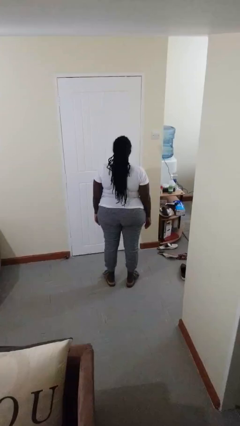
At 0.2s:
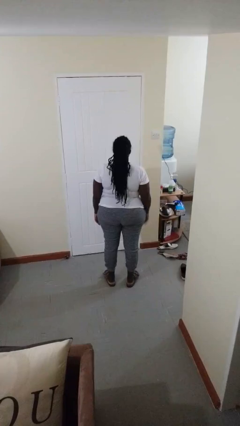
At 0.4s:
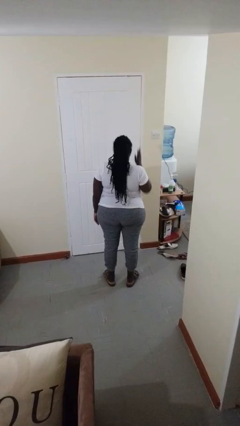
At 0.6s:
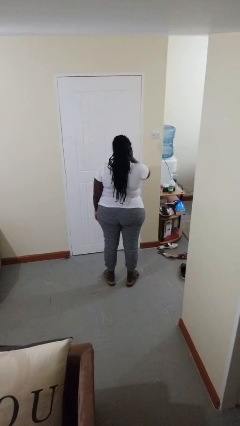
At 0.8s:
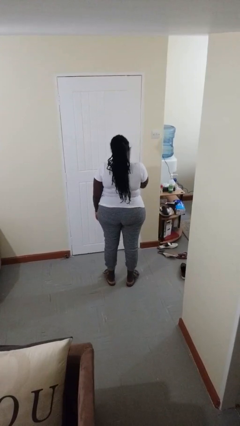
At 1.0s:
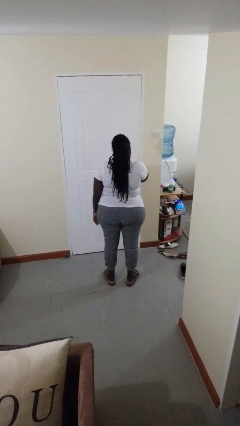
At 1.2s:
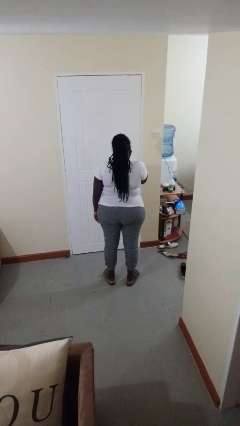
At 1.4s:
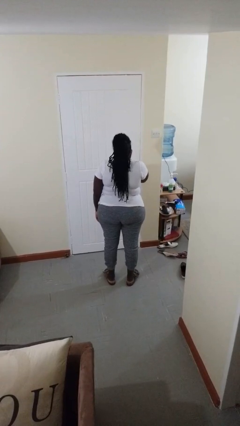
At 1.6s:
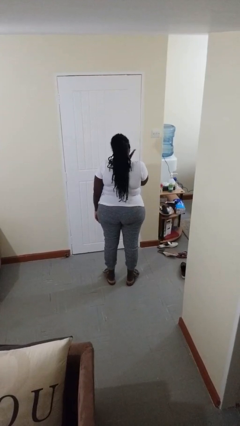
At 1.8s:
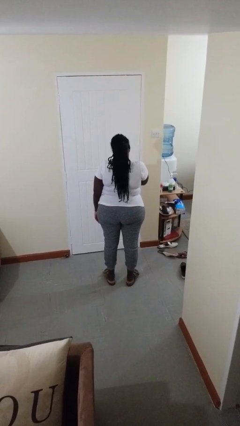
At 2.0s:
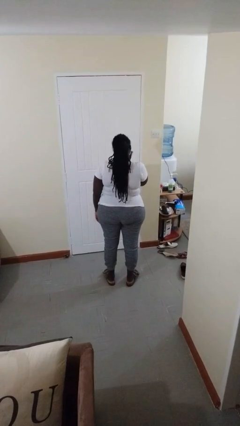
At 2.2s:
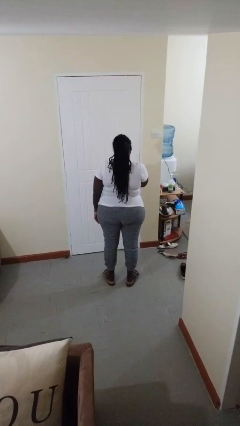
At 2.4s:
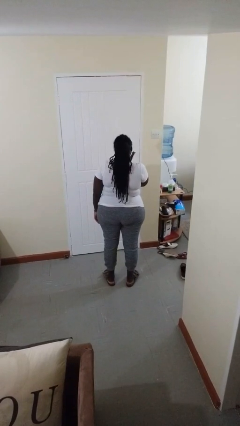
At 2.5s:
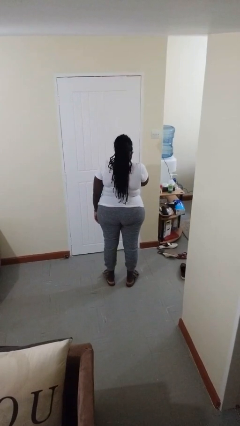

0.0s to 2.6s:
person swats bug

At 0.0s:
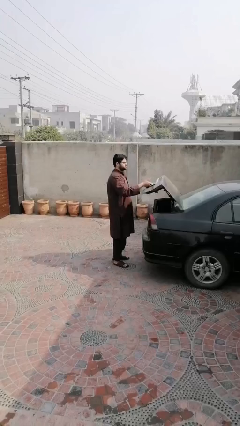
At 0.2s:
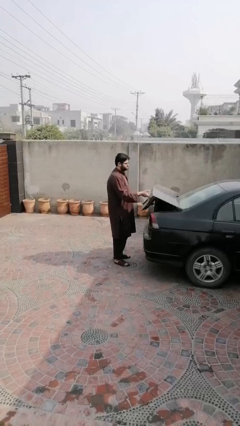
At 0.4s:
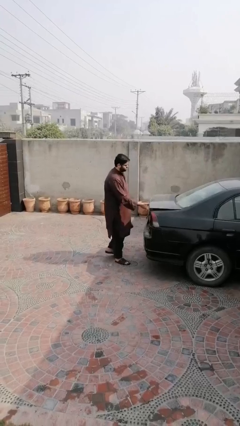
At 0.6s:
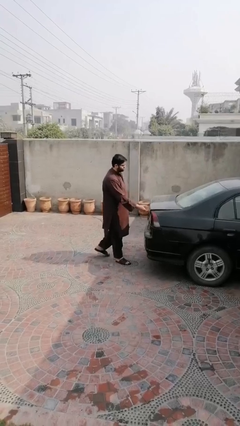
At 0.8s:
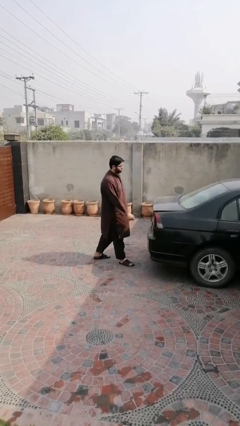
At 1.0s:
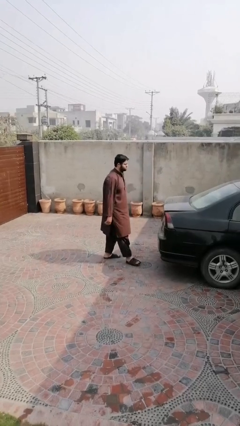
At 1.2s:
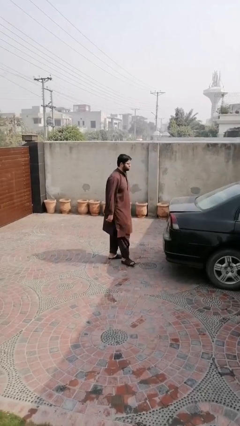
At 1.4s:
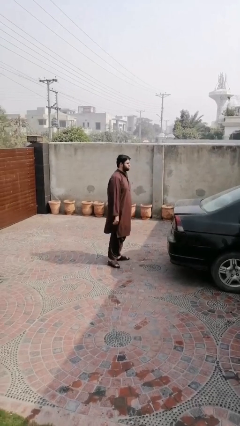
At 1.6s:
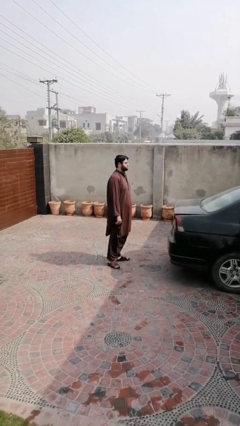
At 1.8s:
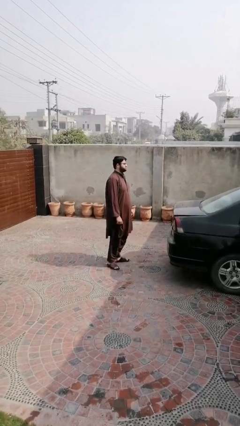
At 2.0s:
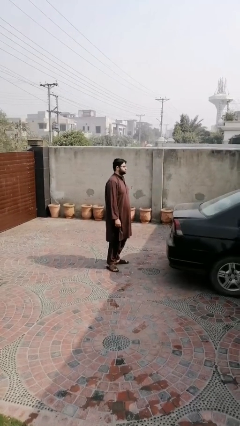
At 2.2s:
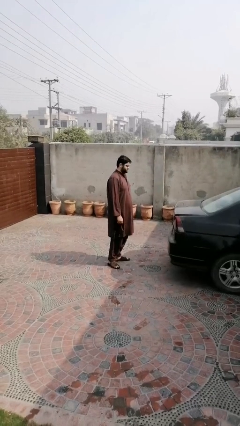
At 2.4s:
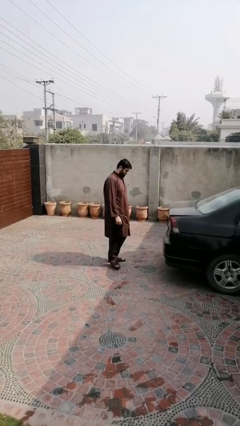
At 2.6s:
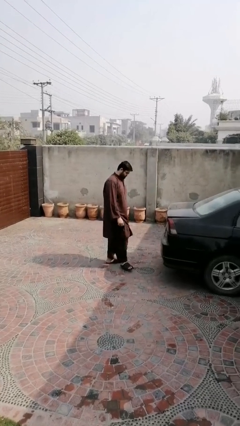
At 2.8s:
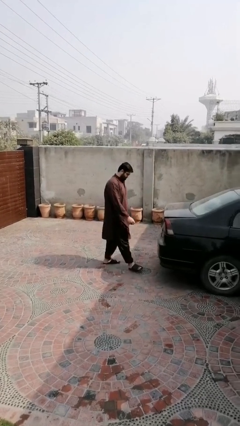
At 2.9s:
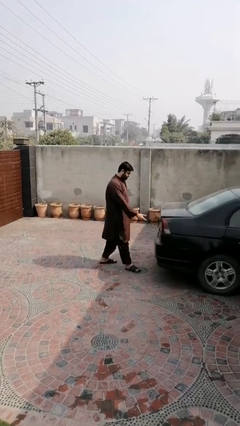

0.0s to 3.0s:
person closes car trunk

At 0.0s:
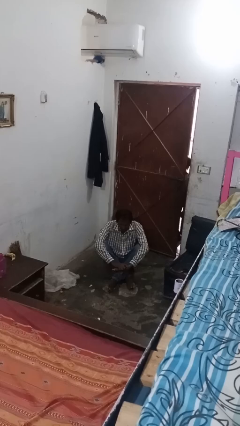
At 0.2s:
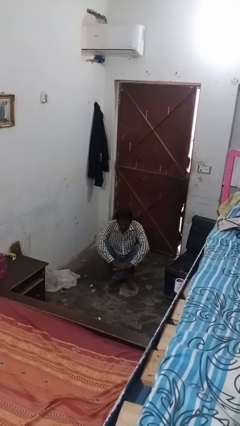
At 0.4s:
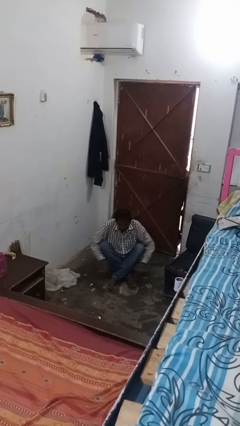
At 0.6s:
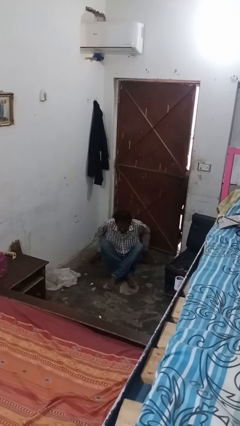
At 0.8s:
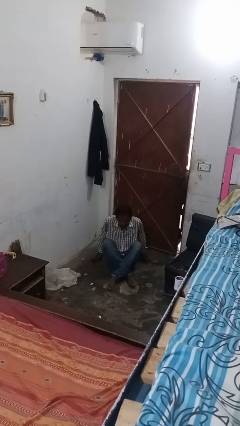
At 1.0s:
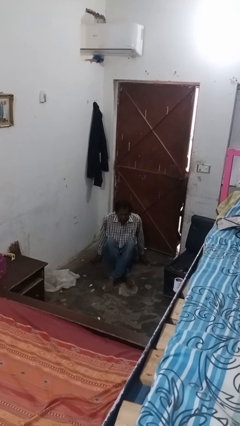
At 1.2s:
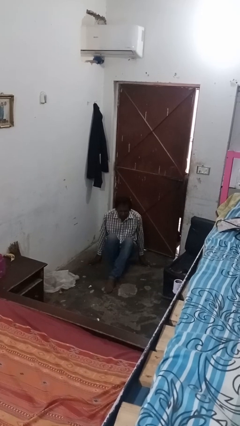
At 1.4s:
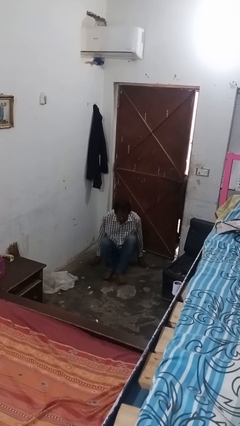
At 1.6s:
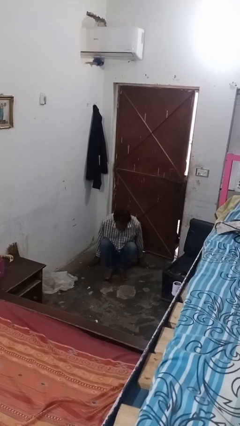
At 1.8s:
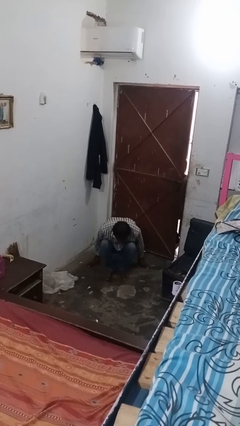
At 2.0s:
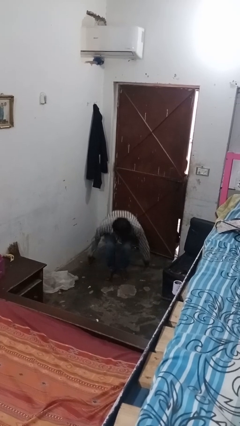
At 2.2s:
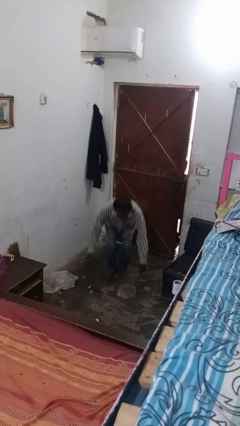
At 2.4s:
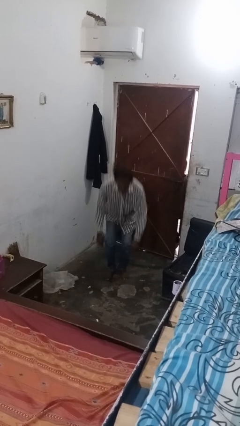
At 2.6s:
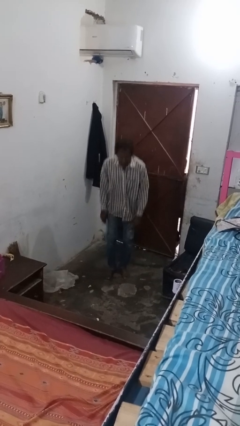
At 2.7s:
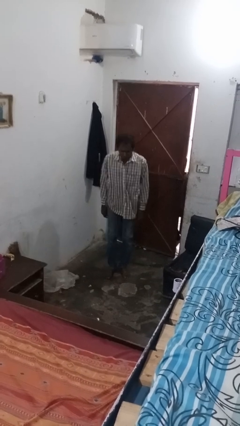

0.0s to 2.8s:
person stands up from floor

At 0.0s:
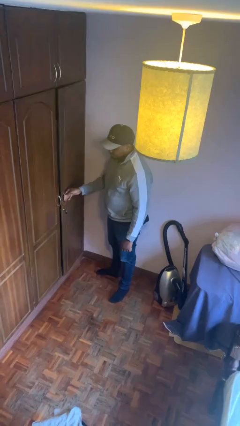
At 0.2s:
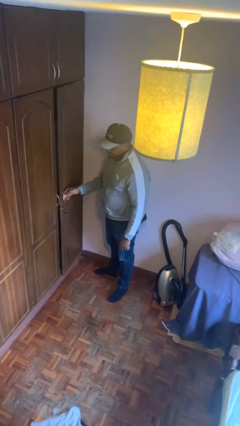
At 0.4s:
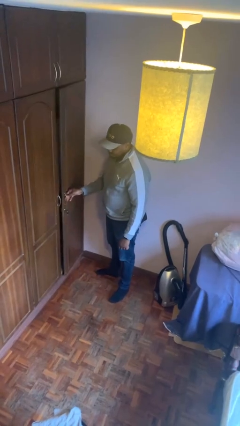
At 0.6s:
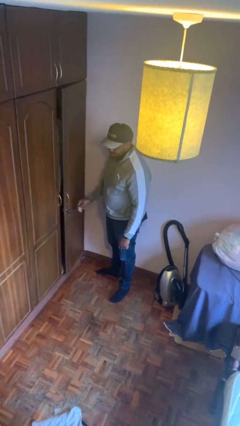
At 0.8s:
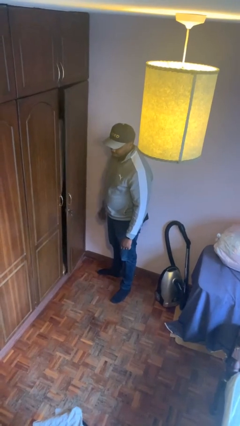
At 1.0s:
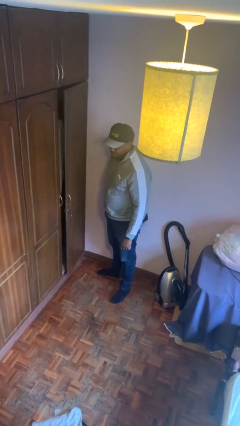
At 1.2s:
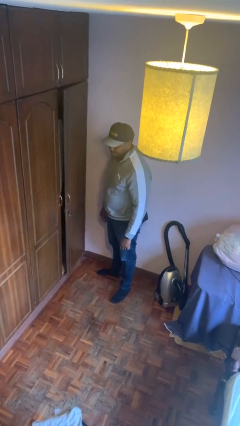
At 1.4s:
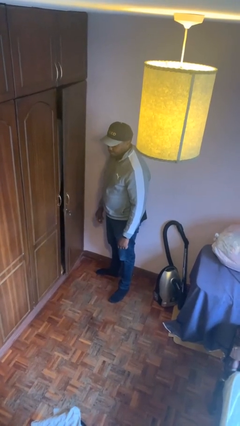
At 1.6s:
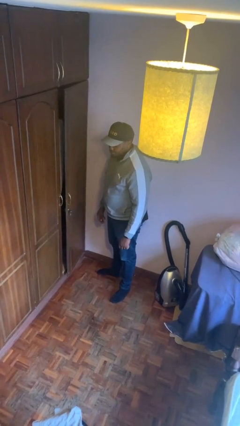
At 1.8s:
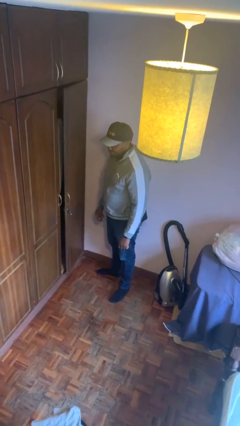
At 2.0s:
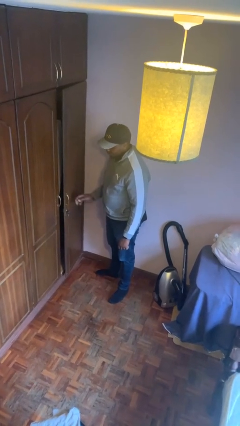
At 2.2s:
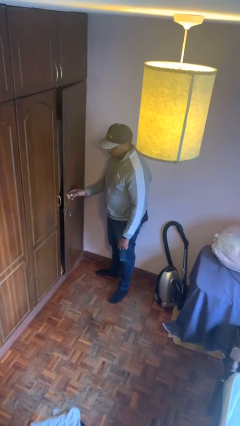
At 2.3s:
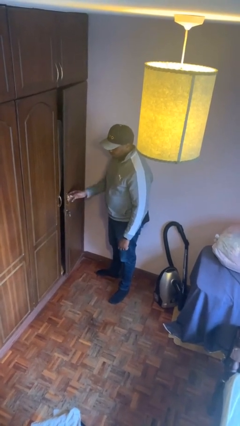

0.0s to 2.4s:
person closes closet door

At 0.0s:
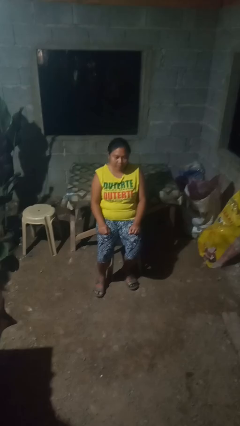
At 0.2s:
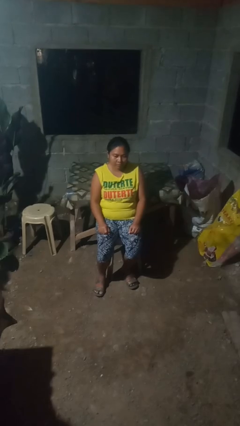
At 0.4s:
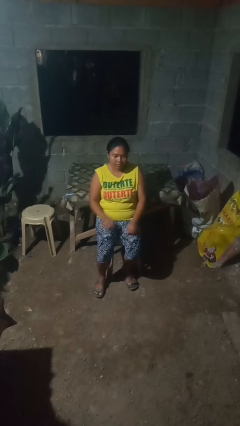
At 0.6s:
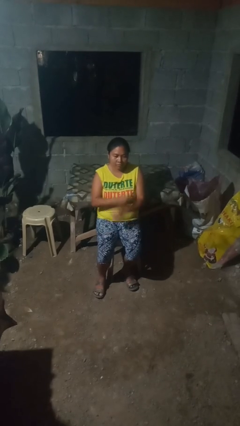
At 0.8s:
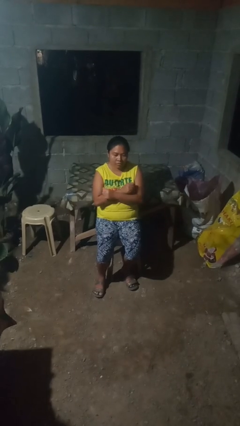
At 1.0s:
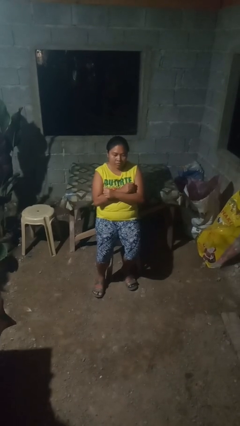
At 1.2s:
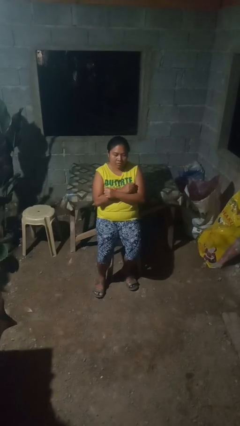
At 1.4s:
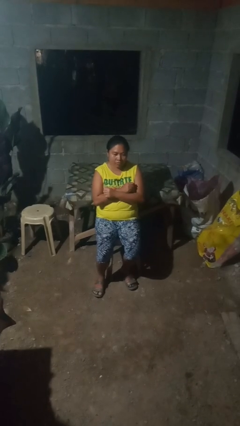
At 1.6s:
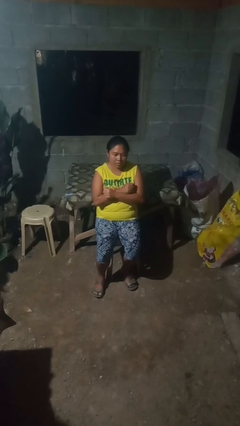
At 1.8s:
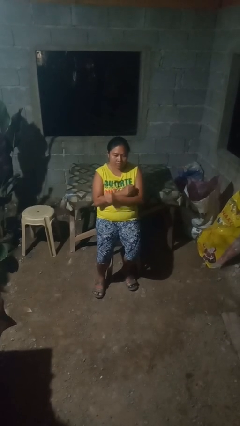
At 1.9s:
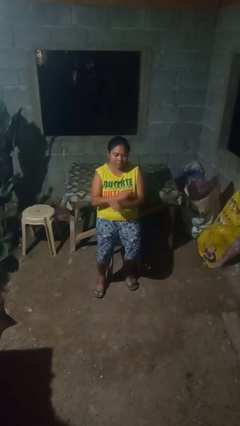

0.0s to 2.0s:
person crosses arms

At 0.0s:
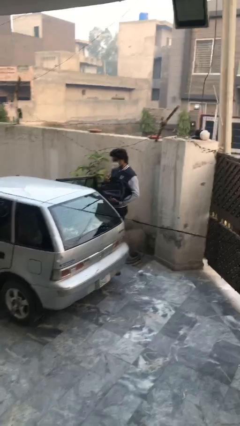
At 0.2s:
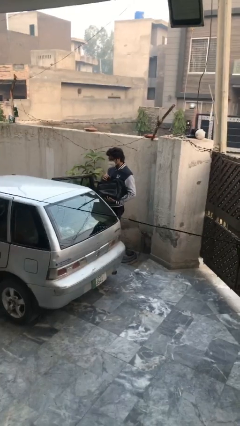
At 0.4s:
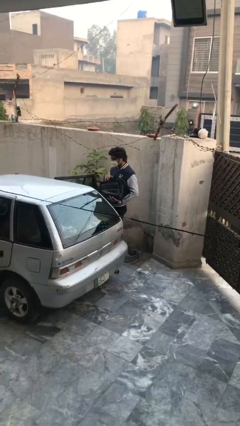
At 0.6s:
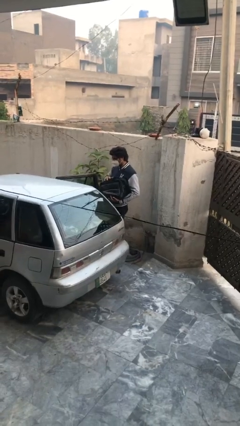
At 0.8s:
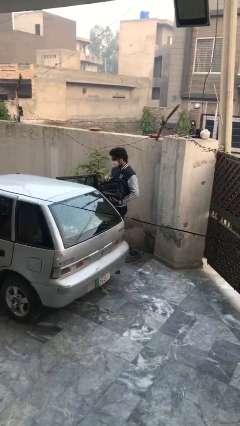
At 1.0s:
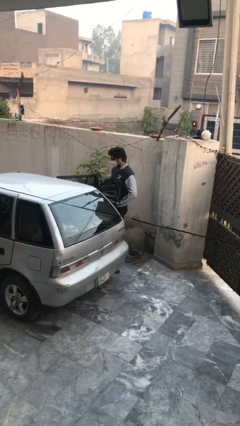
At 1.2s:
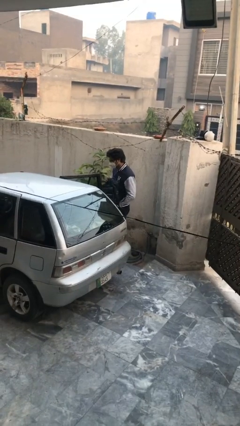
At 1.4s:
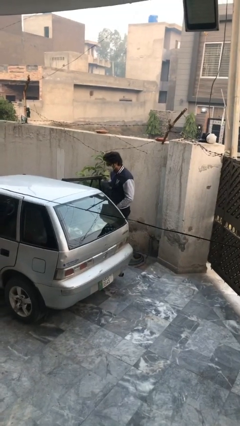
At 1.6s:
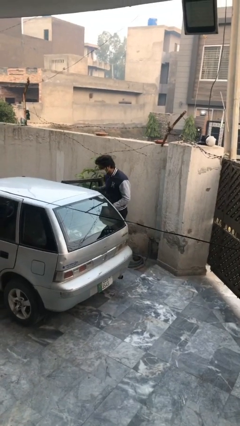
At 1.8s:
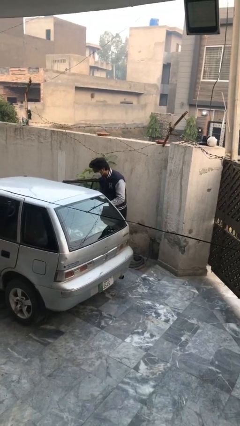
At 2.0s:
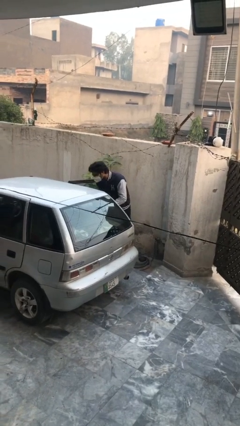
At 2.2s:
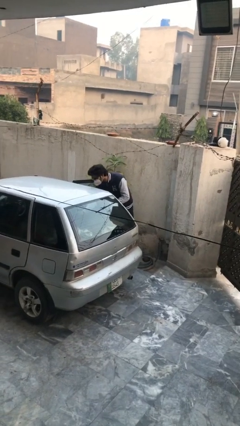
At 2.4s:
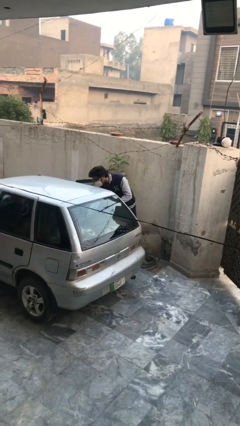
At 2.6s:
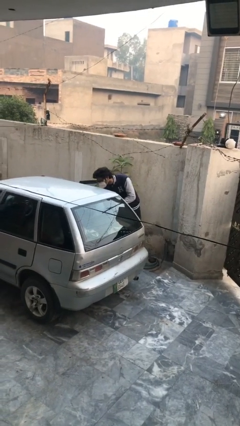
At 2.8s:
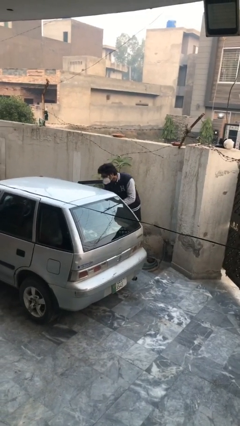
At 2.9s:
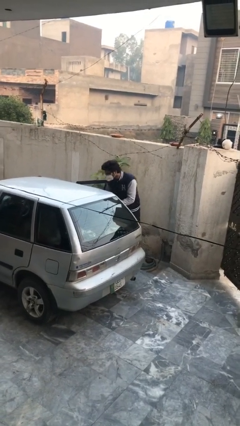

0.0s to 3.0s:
person loads car

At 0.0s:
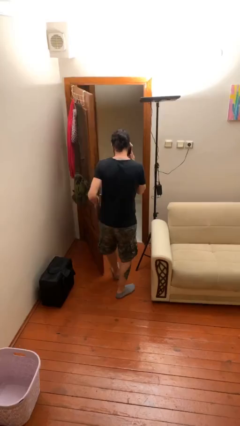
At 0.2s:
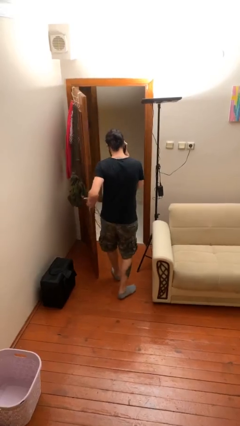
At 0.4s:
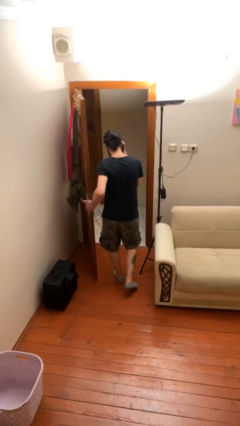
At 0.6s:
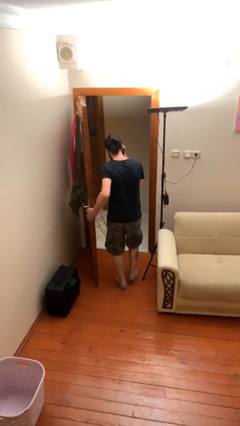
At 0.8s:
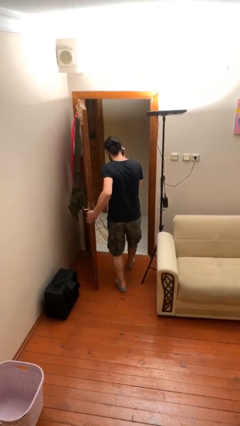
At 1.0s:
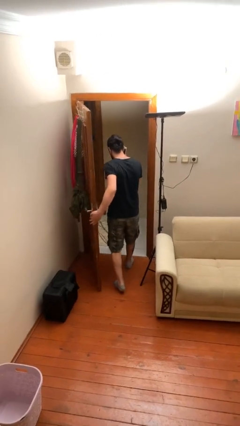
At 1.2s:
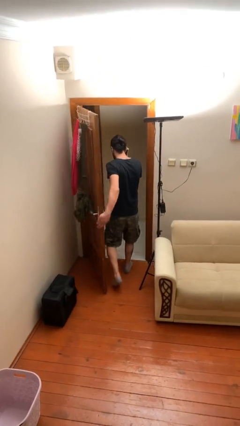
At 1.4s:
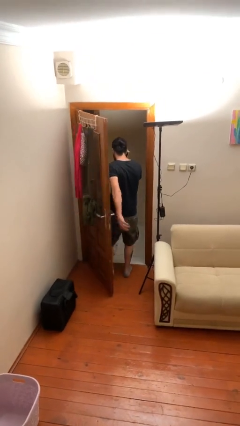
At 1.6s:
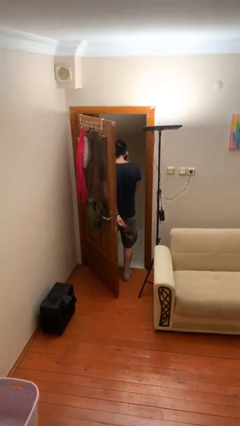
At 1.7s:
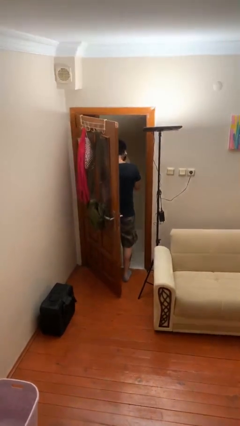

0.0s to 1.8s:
person exits scene through structure
